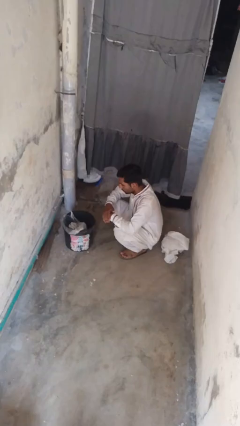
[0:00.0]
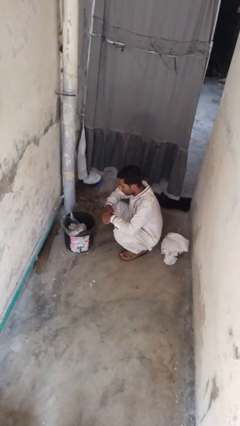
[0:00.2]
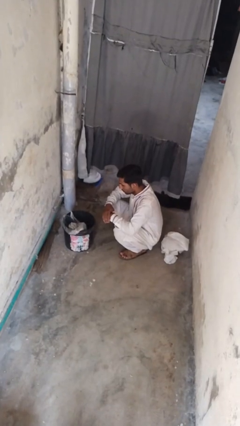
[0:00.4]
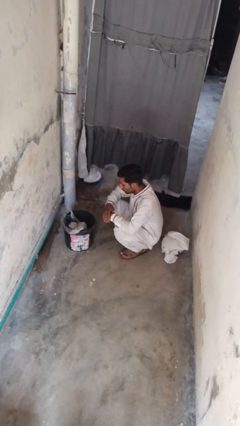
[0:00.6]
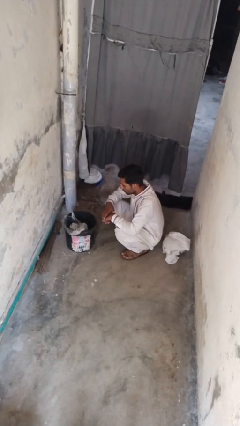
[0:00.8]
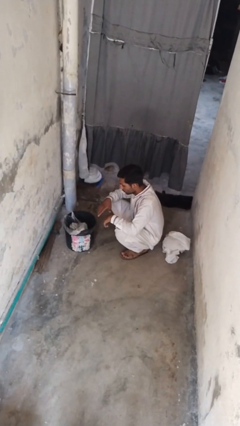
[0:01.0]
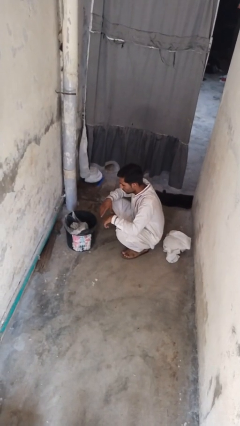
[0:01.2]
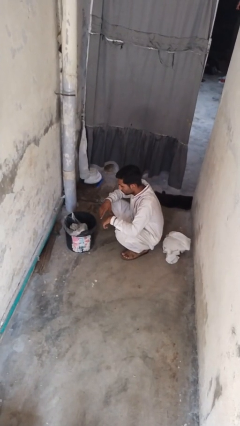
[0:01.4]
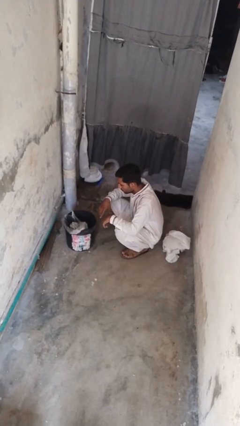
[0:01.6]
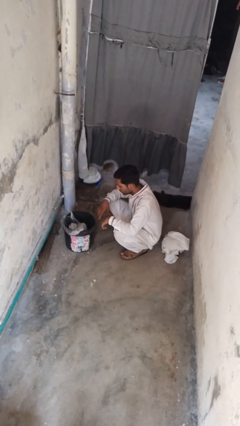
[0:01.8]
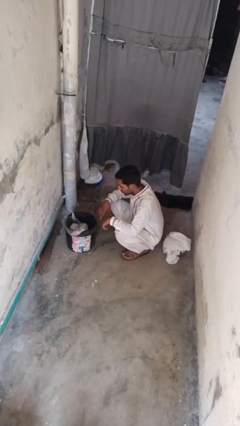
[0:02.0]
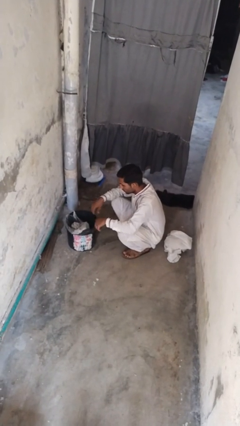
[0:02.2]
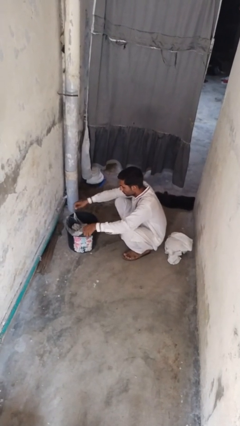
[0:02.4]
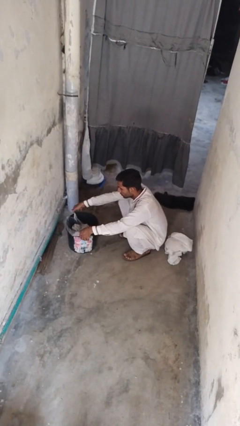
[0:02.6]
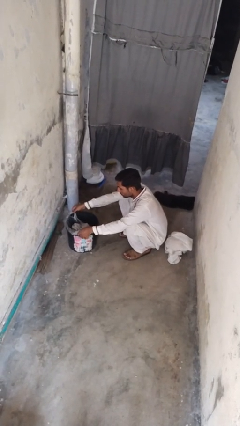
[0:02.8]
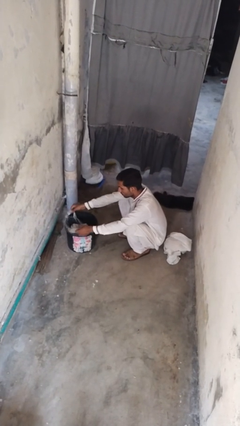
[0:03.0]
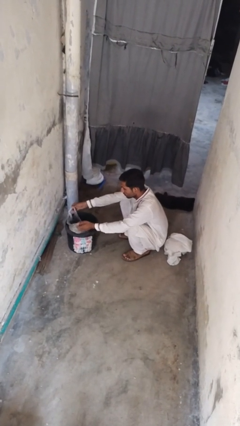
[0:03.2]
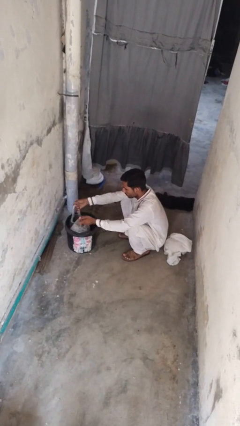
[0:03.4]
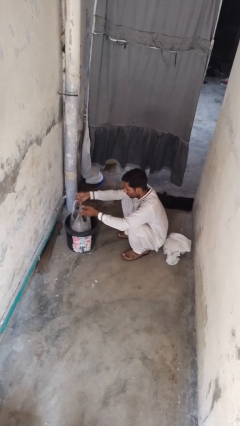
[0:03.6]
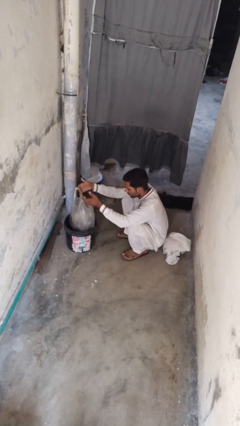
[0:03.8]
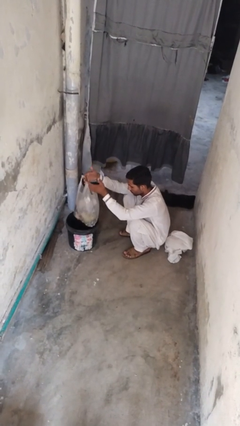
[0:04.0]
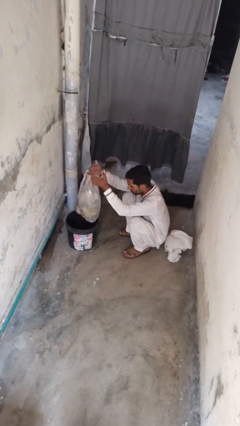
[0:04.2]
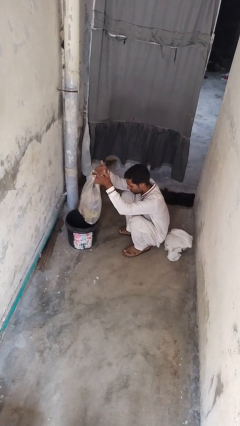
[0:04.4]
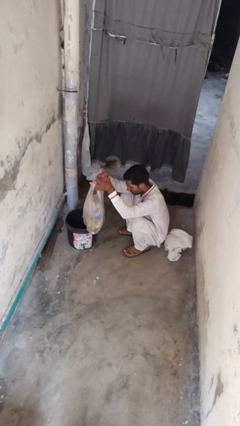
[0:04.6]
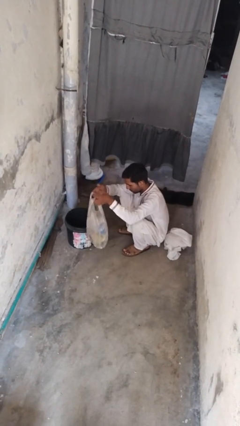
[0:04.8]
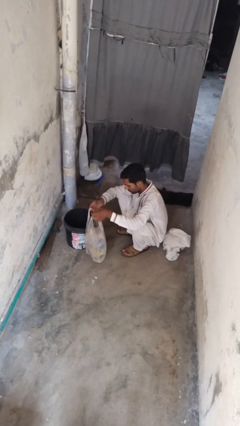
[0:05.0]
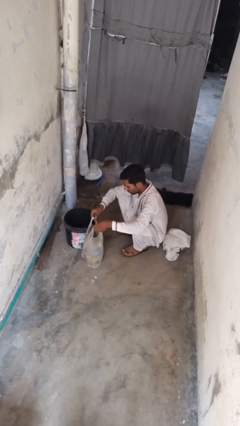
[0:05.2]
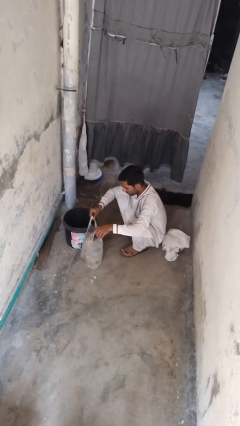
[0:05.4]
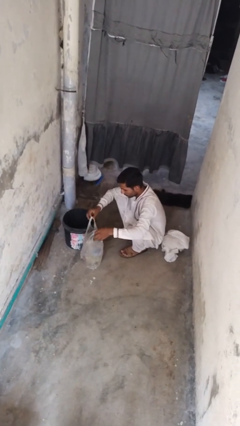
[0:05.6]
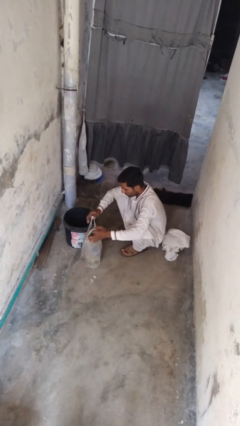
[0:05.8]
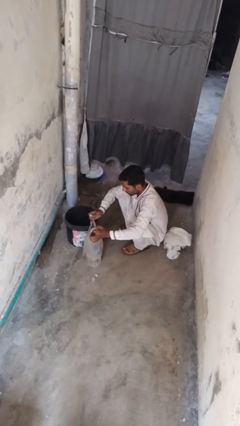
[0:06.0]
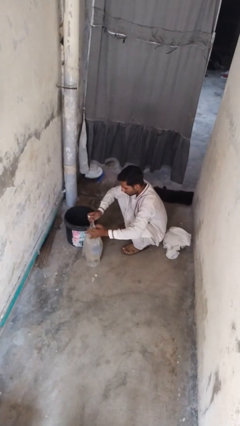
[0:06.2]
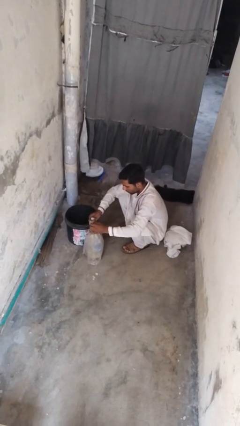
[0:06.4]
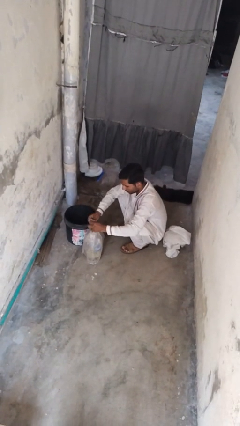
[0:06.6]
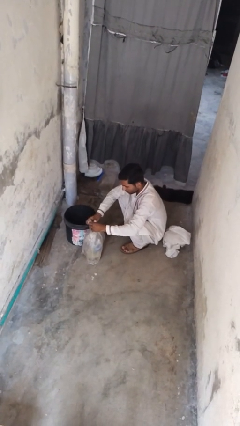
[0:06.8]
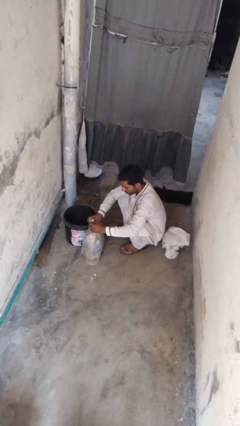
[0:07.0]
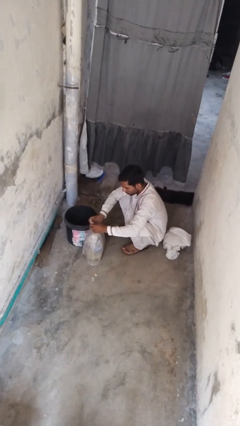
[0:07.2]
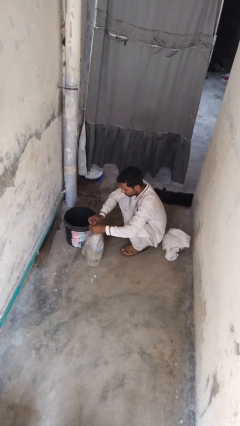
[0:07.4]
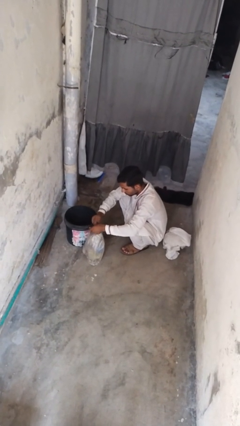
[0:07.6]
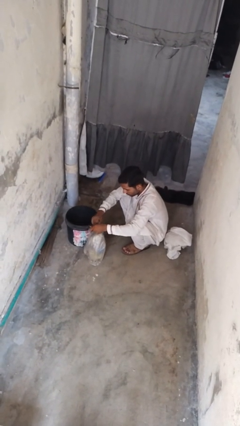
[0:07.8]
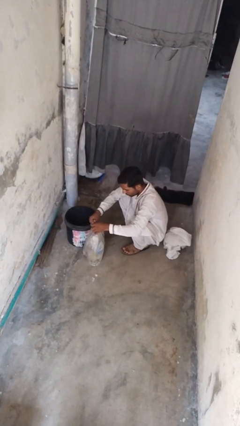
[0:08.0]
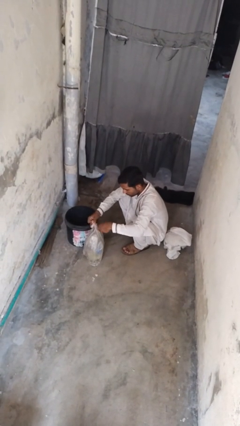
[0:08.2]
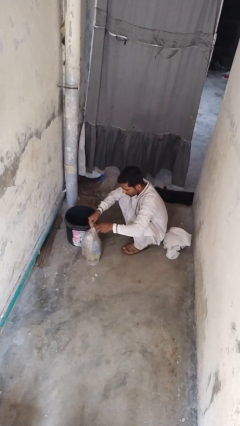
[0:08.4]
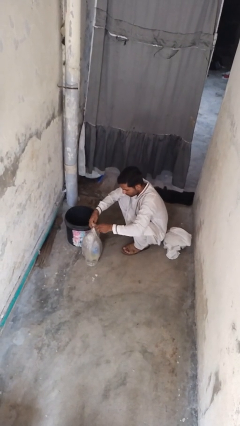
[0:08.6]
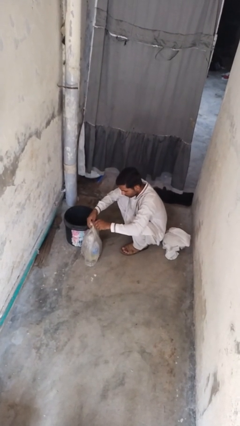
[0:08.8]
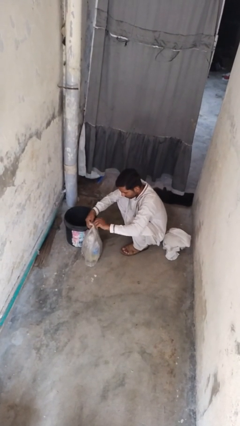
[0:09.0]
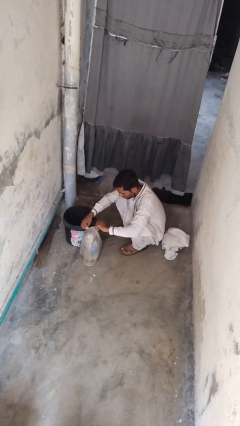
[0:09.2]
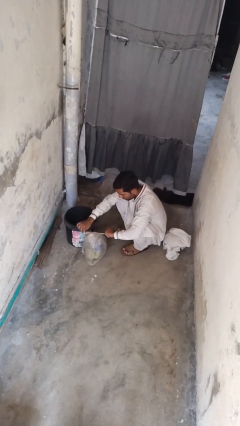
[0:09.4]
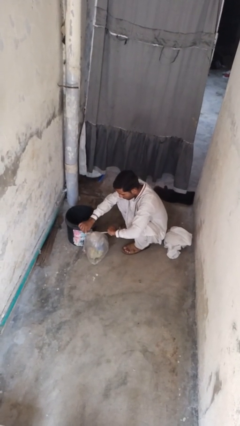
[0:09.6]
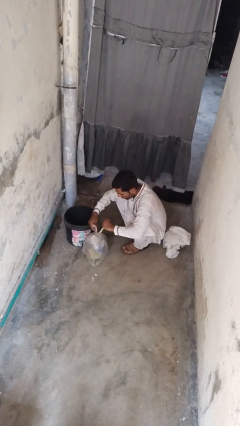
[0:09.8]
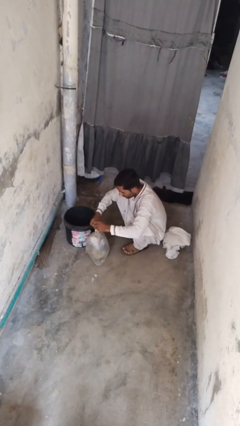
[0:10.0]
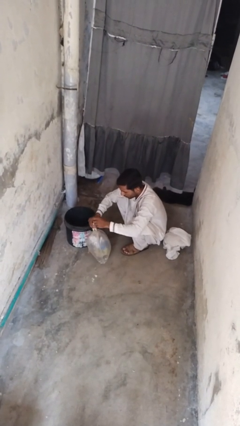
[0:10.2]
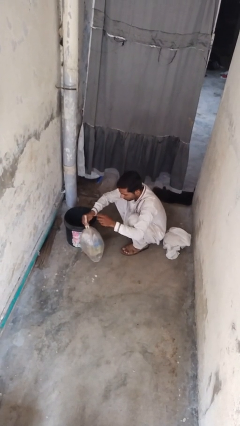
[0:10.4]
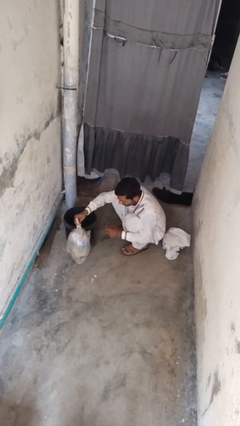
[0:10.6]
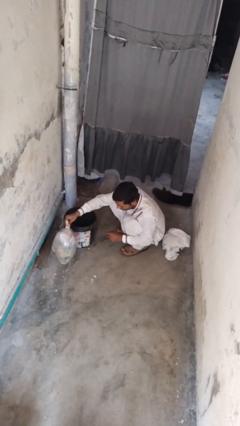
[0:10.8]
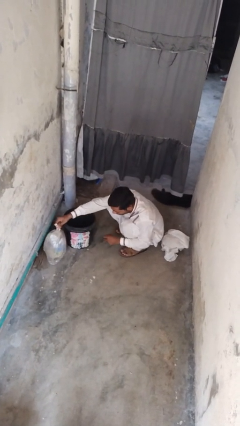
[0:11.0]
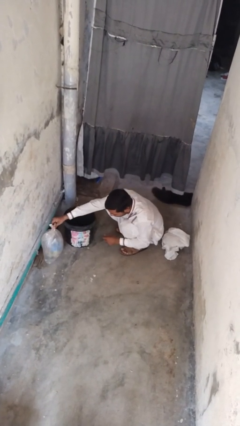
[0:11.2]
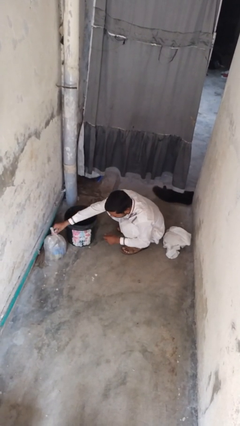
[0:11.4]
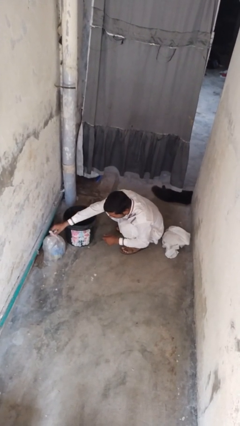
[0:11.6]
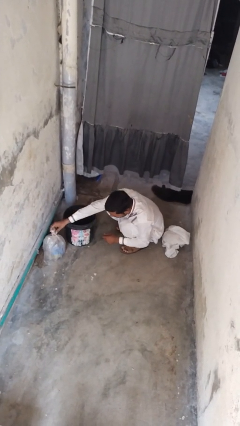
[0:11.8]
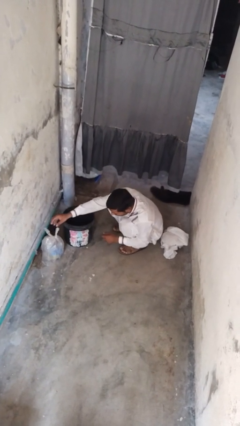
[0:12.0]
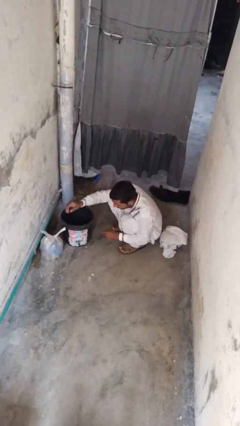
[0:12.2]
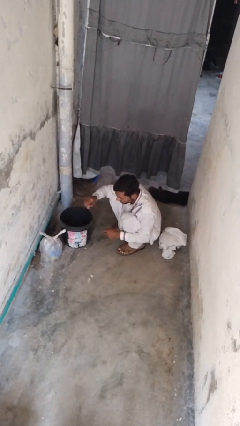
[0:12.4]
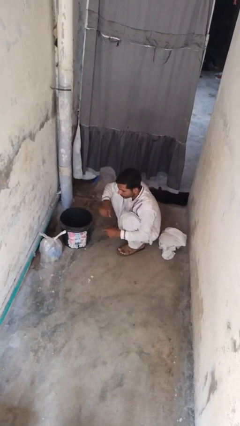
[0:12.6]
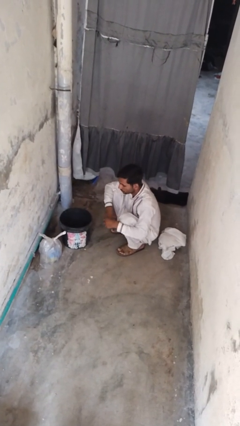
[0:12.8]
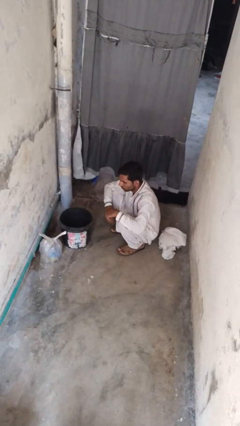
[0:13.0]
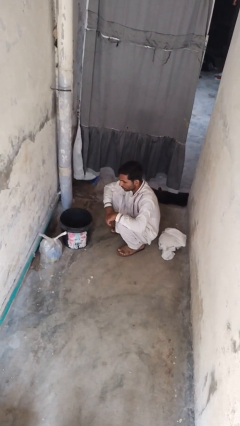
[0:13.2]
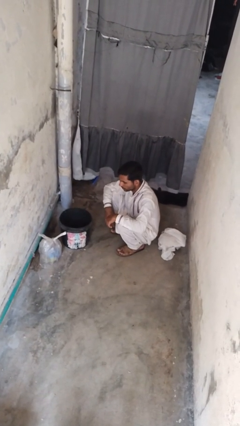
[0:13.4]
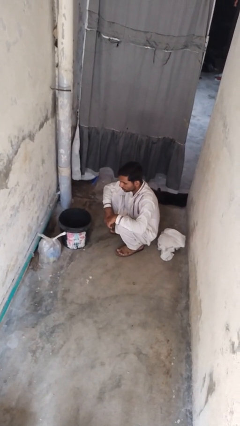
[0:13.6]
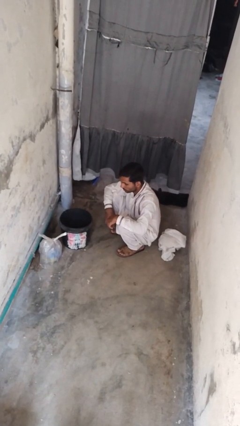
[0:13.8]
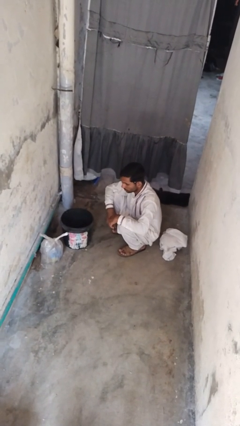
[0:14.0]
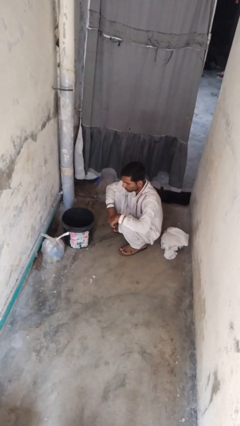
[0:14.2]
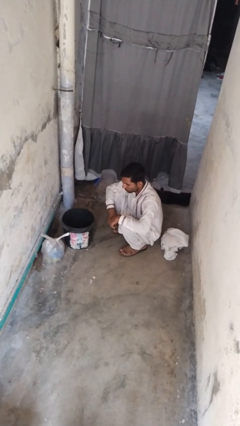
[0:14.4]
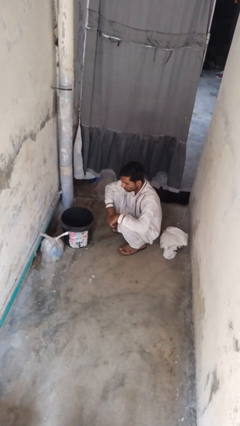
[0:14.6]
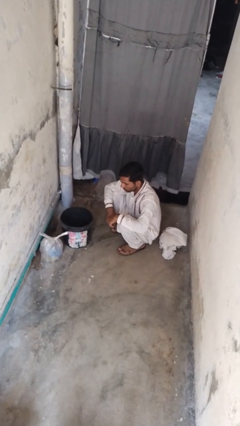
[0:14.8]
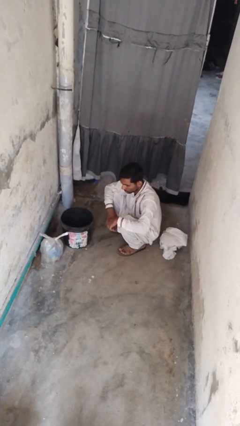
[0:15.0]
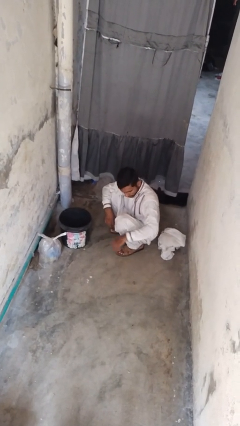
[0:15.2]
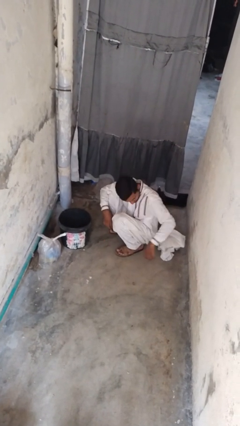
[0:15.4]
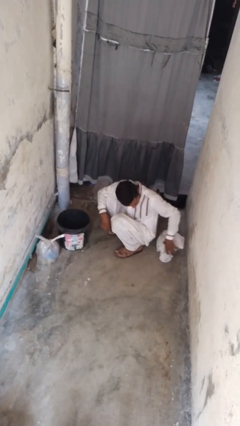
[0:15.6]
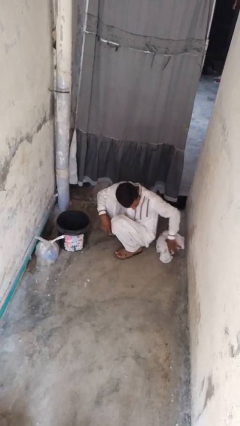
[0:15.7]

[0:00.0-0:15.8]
person removes trashbag from trashcan

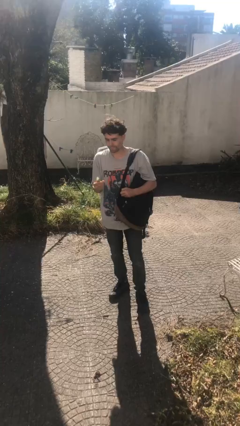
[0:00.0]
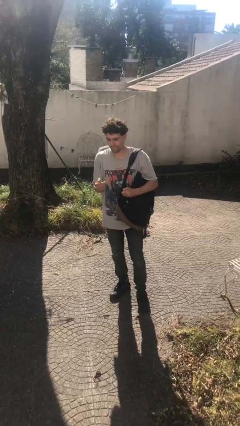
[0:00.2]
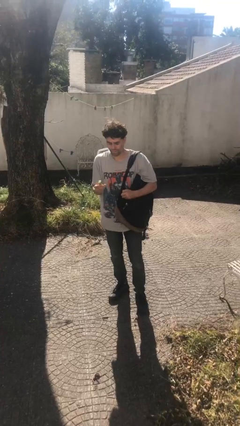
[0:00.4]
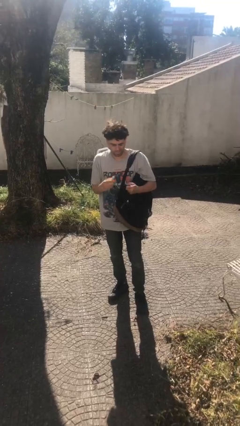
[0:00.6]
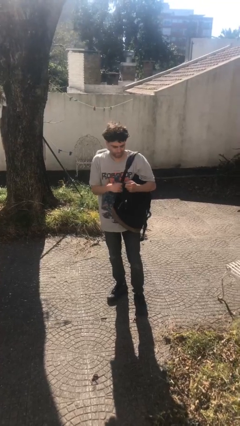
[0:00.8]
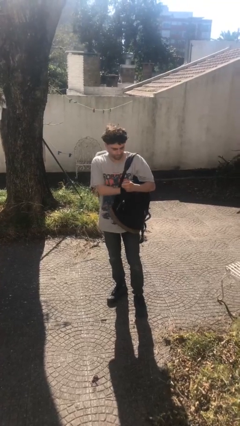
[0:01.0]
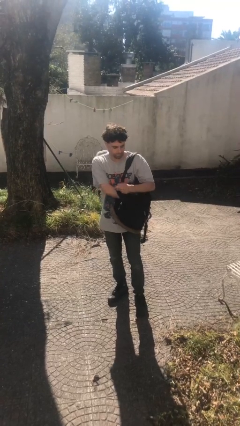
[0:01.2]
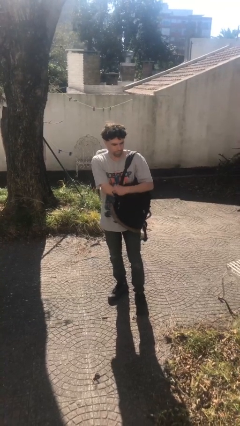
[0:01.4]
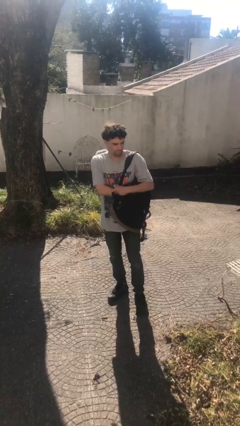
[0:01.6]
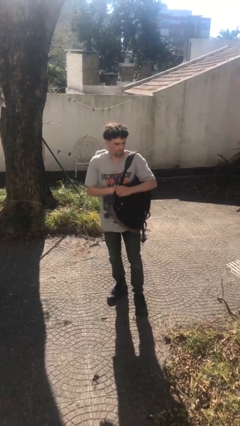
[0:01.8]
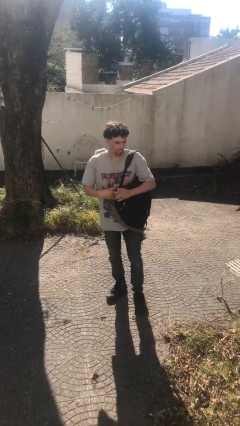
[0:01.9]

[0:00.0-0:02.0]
person puts object into backpack
